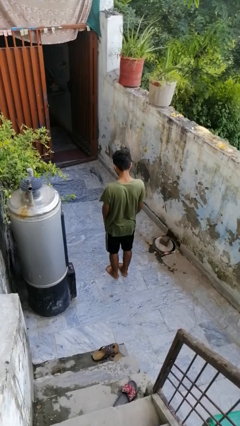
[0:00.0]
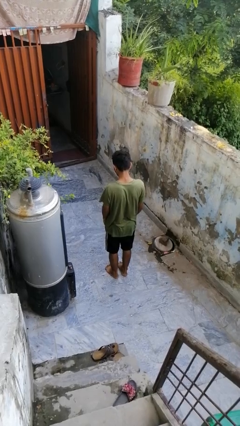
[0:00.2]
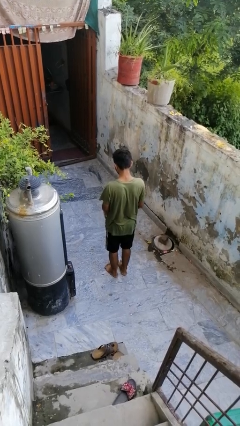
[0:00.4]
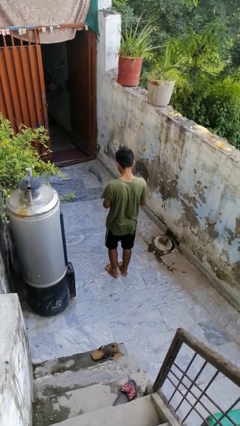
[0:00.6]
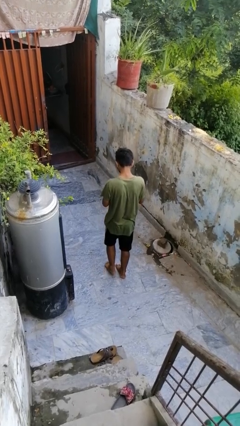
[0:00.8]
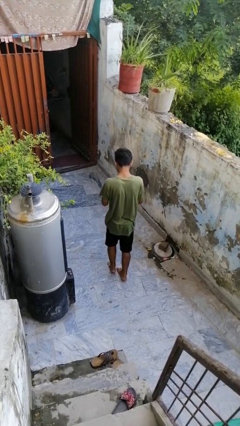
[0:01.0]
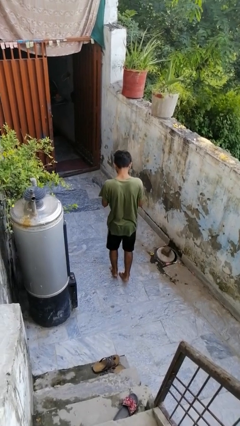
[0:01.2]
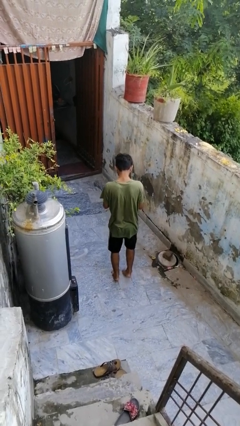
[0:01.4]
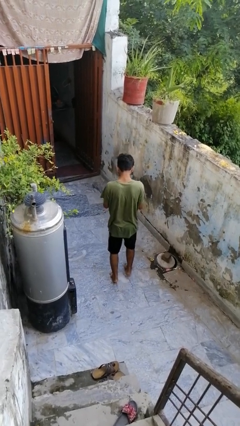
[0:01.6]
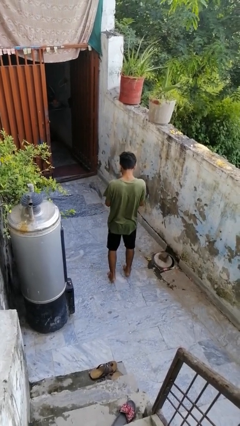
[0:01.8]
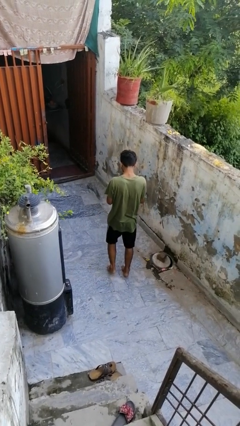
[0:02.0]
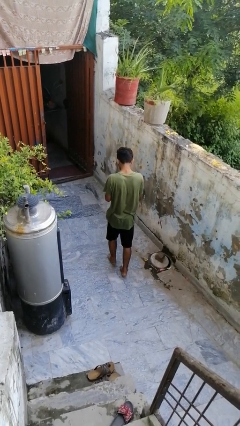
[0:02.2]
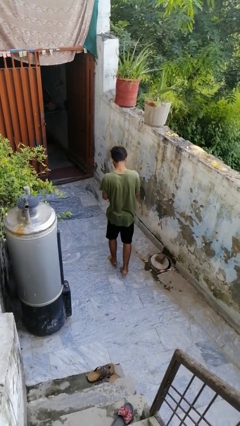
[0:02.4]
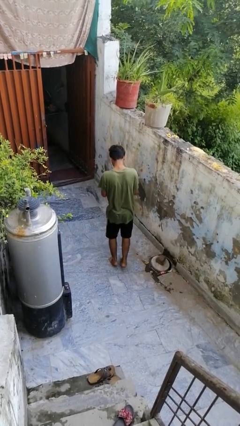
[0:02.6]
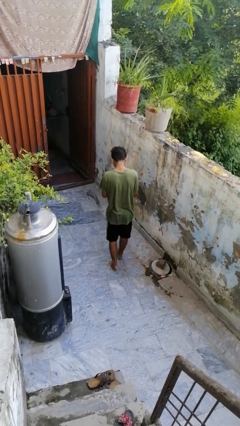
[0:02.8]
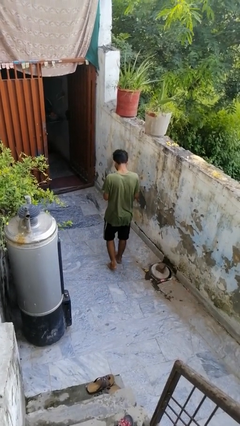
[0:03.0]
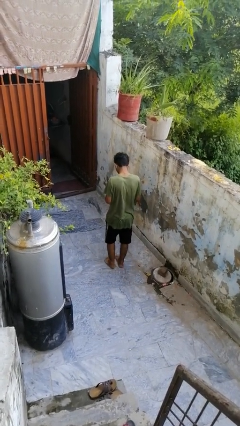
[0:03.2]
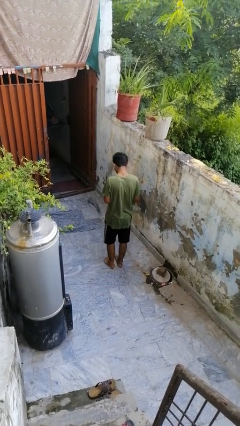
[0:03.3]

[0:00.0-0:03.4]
person walks tiptoe

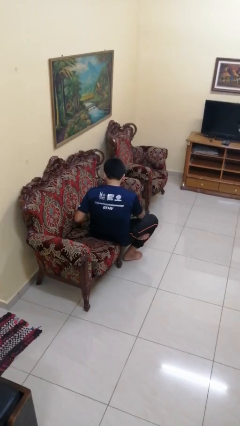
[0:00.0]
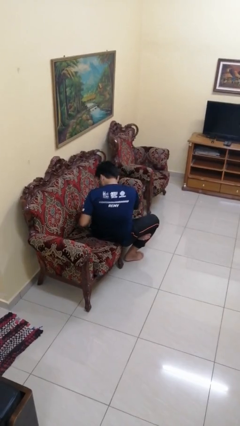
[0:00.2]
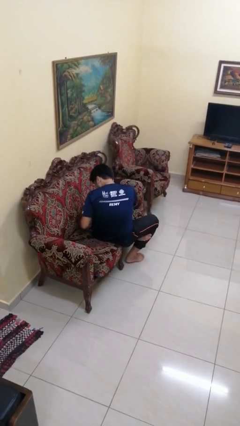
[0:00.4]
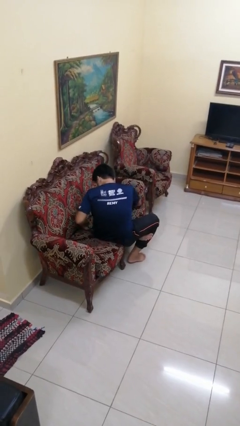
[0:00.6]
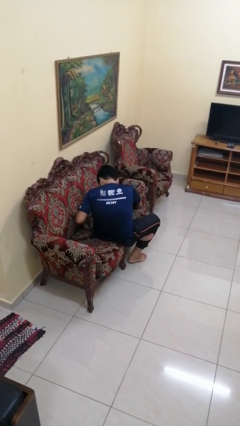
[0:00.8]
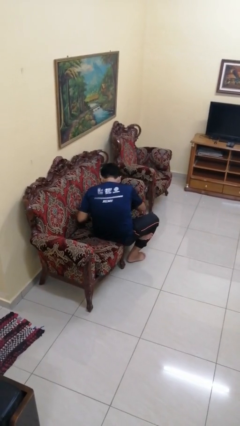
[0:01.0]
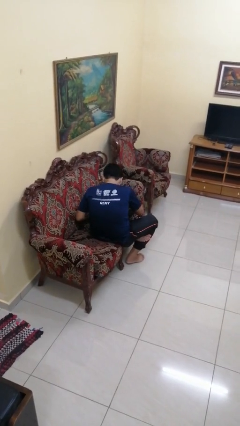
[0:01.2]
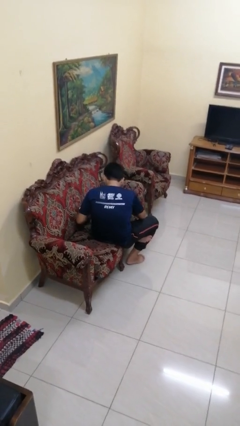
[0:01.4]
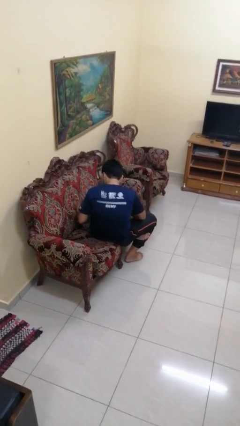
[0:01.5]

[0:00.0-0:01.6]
person searches in couch

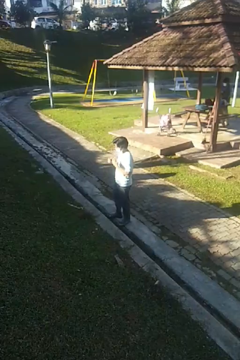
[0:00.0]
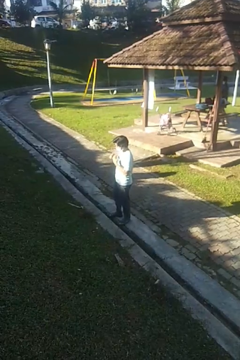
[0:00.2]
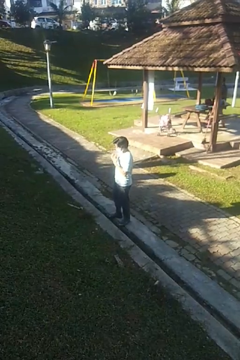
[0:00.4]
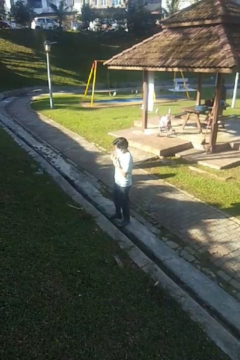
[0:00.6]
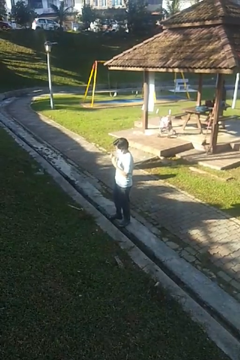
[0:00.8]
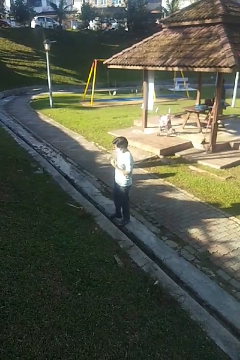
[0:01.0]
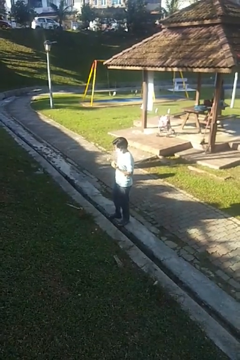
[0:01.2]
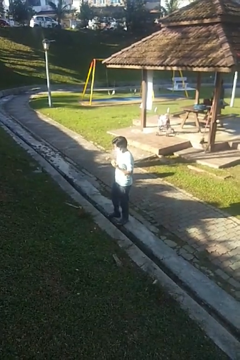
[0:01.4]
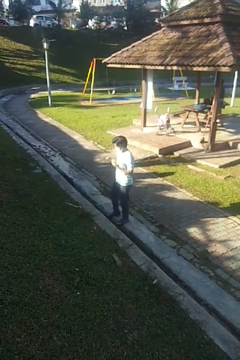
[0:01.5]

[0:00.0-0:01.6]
person takes off ring

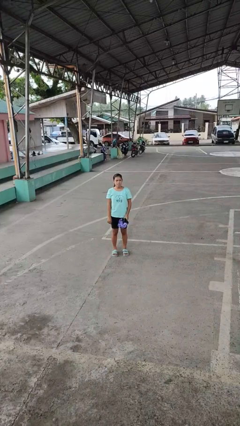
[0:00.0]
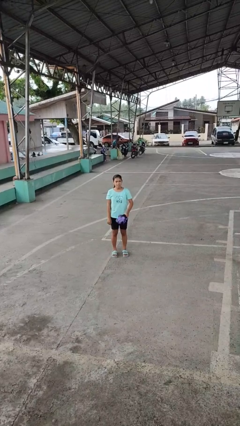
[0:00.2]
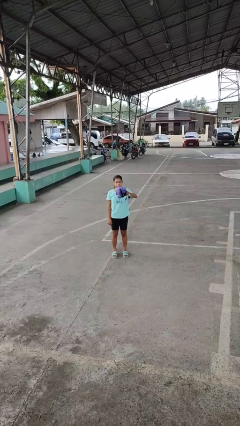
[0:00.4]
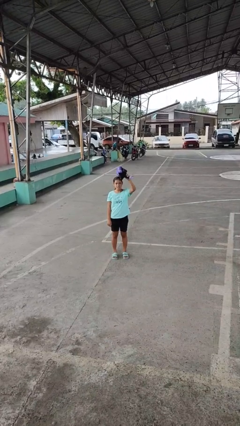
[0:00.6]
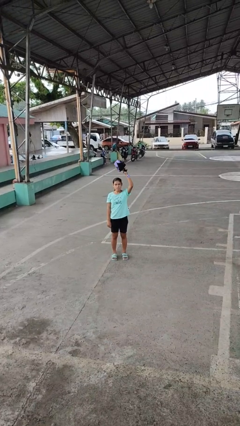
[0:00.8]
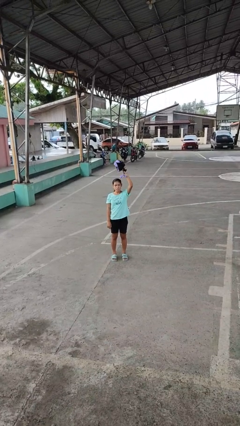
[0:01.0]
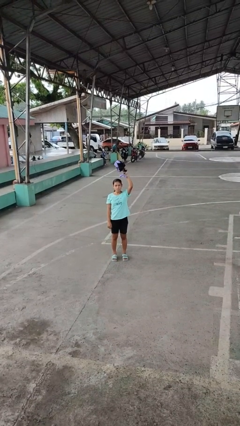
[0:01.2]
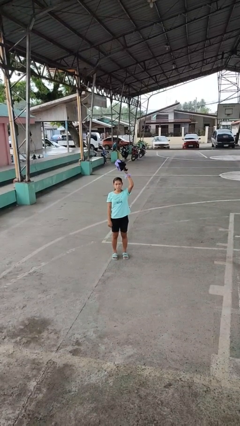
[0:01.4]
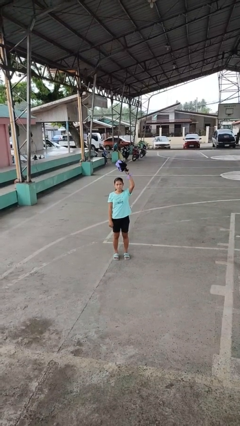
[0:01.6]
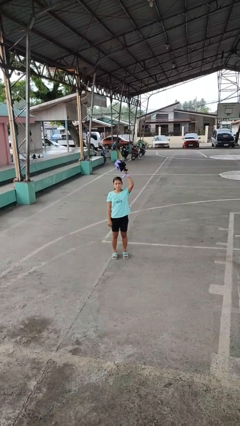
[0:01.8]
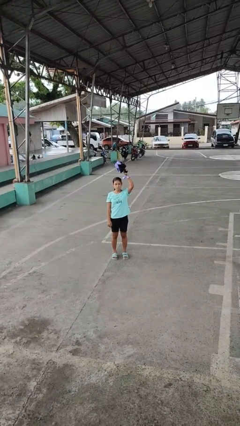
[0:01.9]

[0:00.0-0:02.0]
person holds object above head

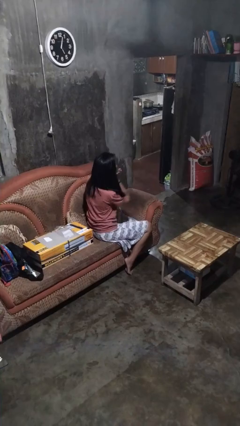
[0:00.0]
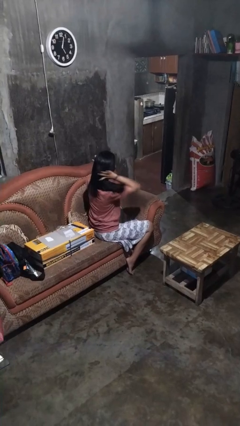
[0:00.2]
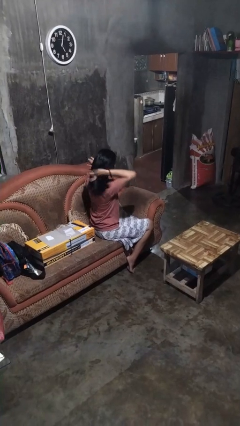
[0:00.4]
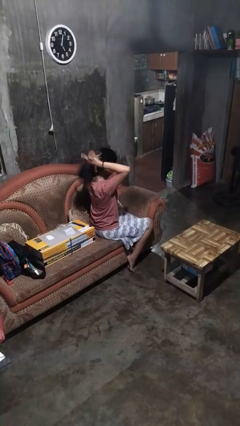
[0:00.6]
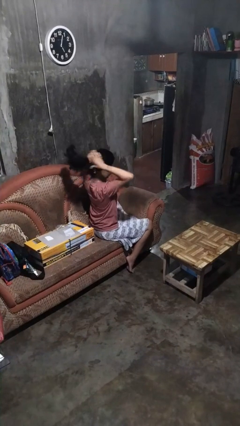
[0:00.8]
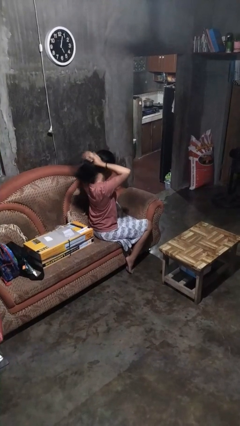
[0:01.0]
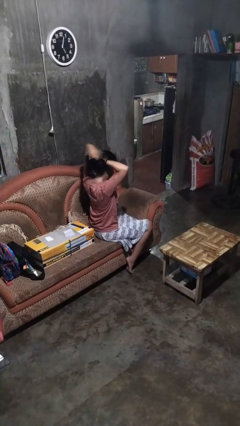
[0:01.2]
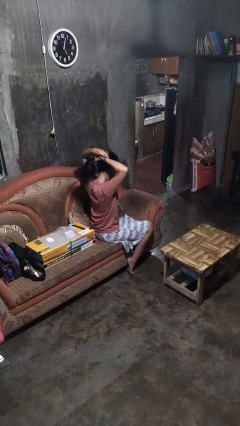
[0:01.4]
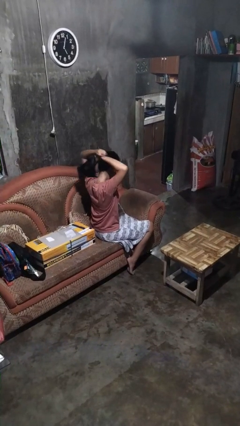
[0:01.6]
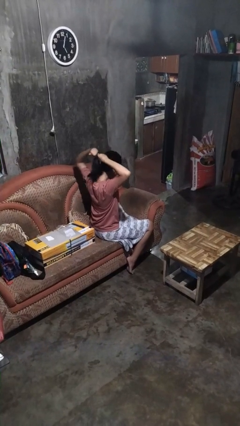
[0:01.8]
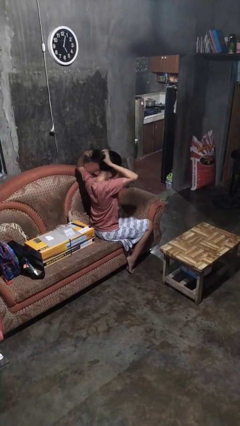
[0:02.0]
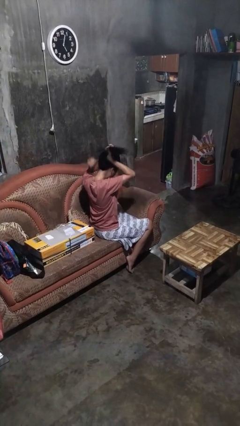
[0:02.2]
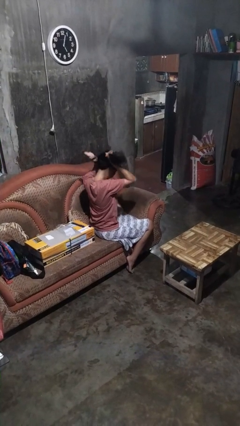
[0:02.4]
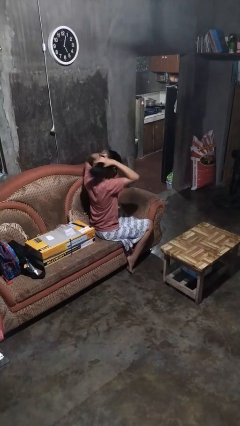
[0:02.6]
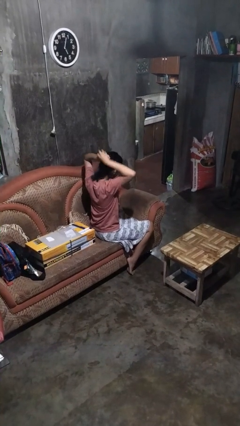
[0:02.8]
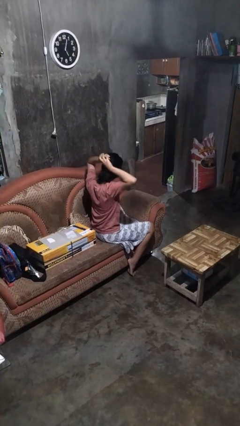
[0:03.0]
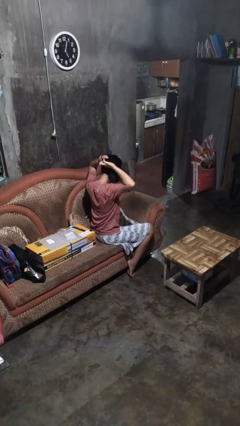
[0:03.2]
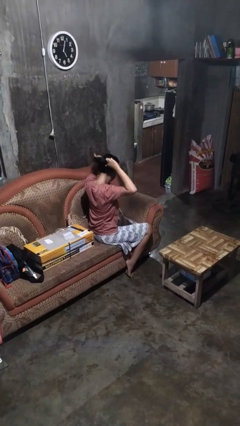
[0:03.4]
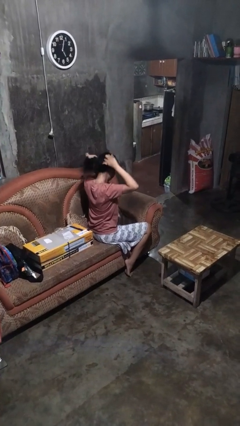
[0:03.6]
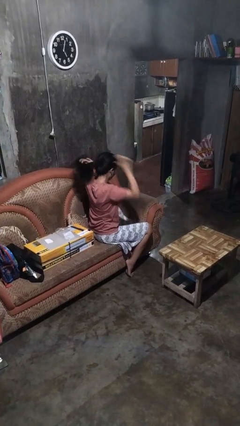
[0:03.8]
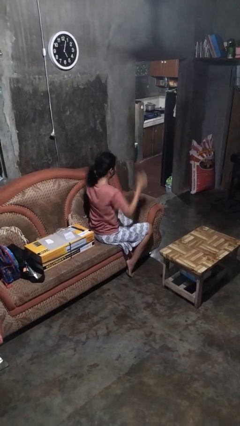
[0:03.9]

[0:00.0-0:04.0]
person puts hair in ponytail

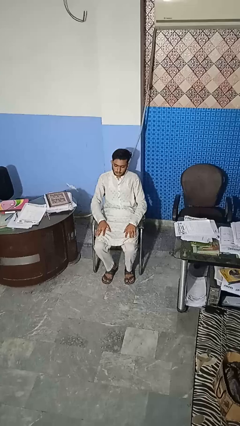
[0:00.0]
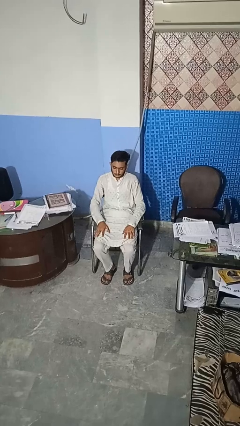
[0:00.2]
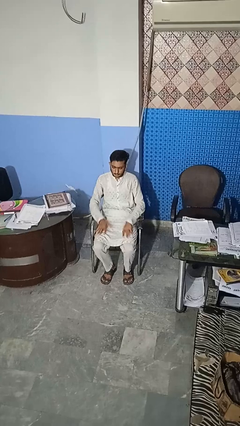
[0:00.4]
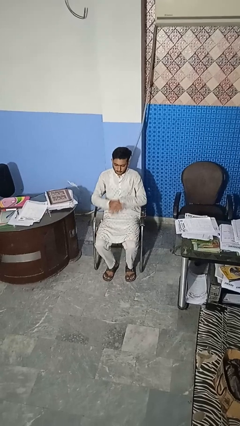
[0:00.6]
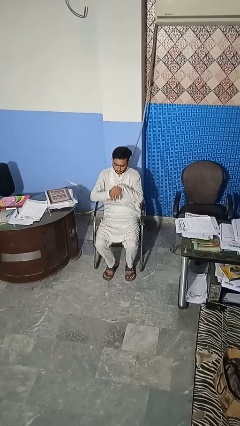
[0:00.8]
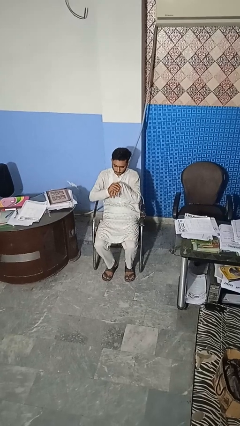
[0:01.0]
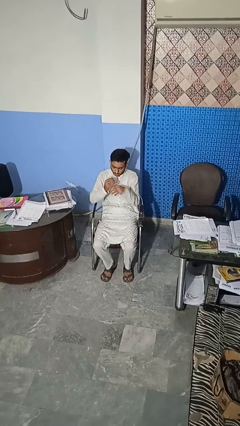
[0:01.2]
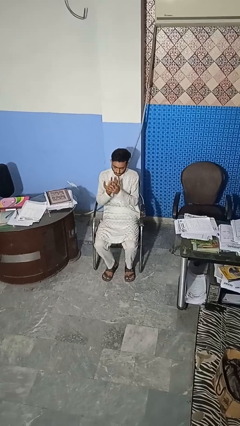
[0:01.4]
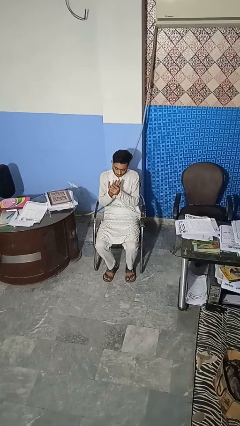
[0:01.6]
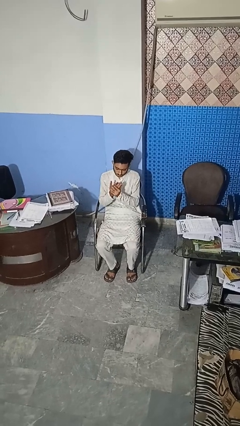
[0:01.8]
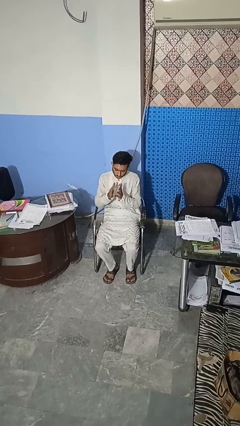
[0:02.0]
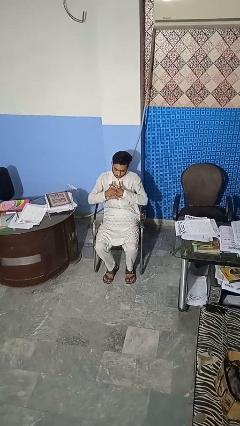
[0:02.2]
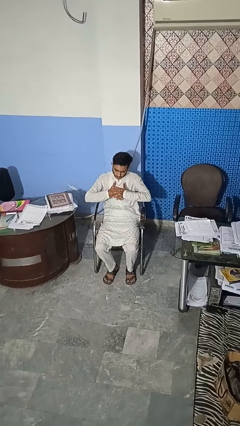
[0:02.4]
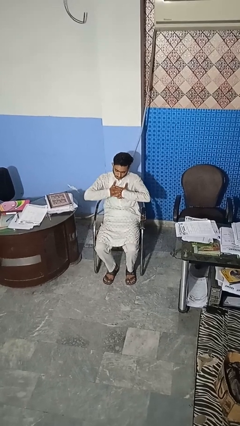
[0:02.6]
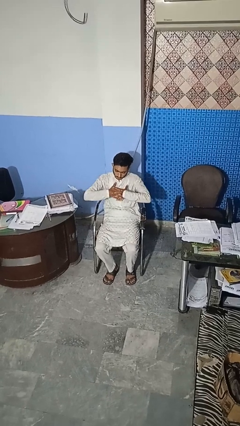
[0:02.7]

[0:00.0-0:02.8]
person cracks knuckles

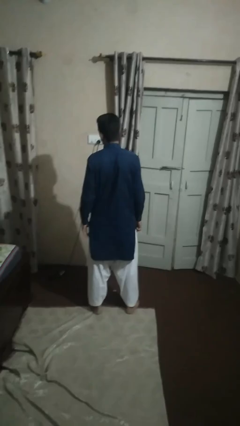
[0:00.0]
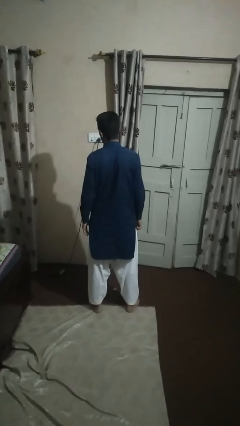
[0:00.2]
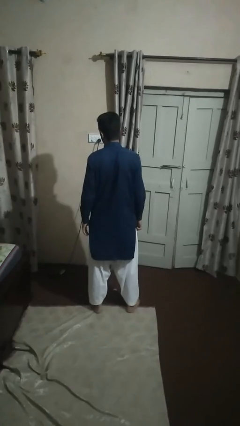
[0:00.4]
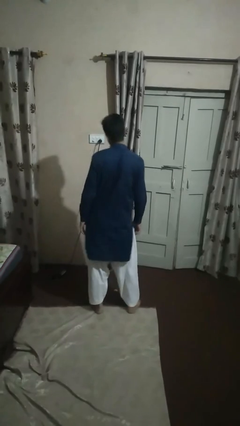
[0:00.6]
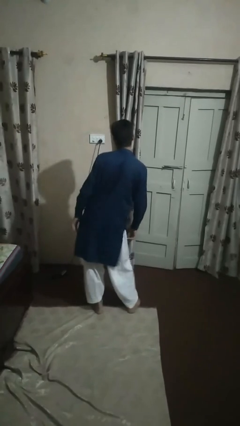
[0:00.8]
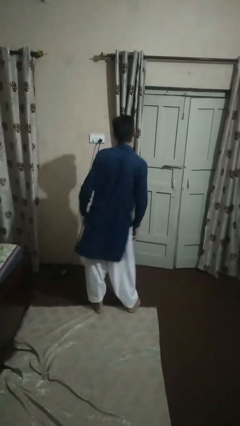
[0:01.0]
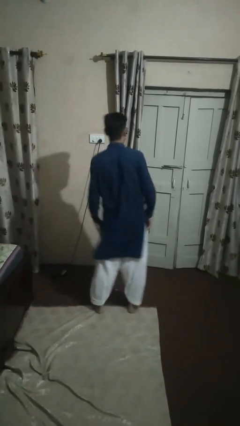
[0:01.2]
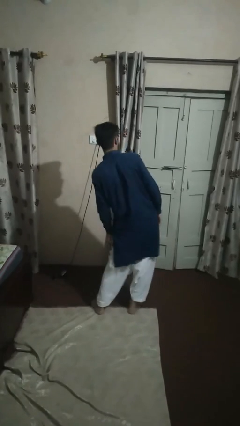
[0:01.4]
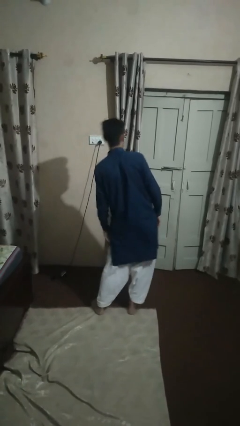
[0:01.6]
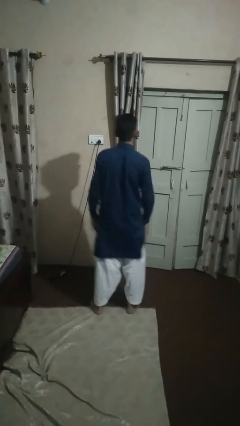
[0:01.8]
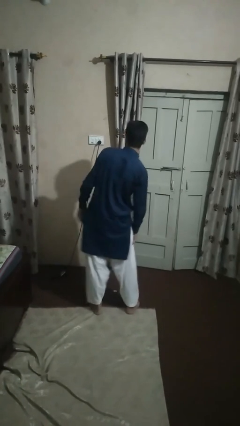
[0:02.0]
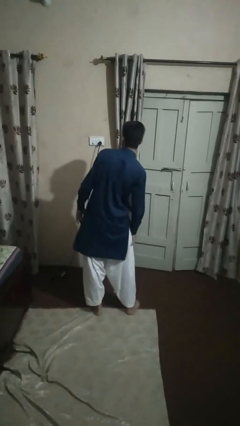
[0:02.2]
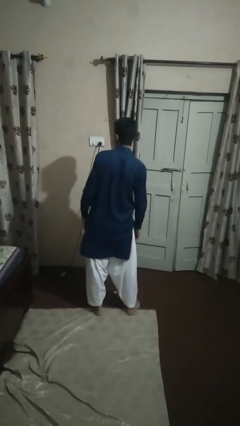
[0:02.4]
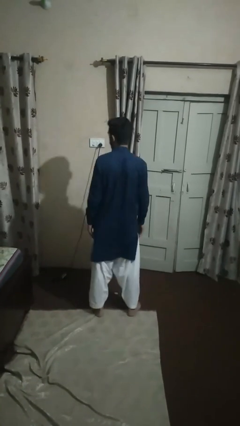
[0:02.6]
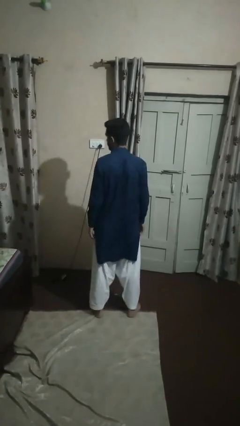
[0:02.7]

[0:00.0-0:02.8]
person wiggles hips
